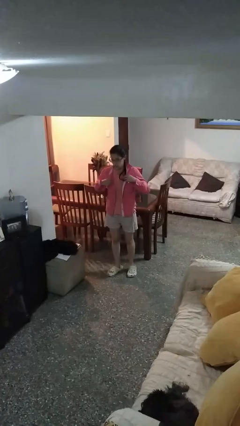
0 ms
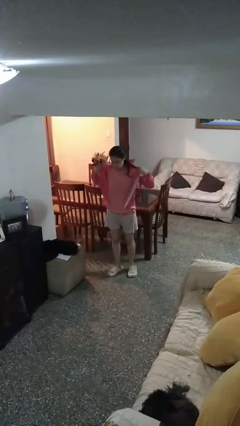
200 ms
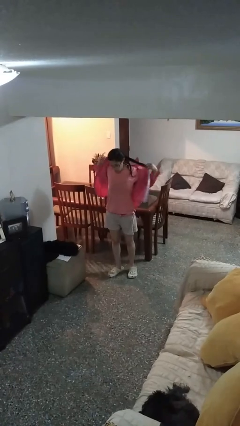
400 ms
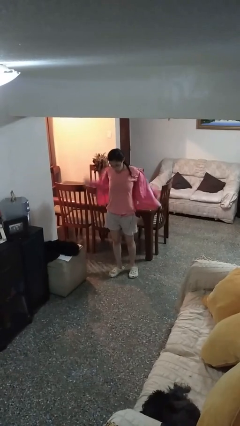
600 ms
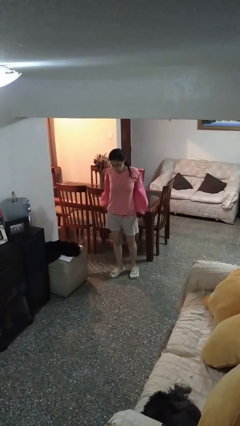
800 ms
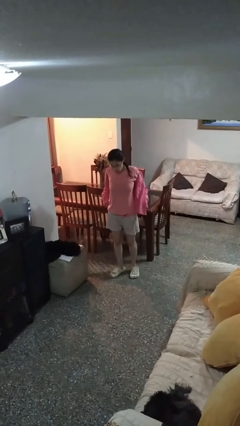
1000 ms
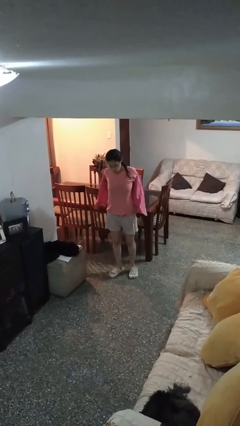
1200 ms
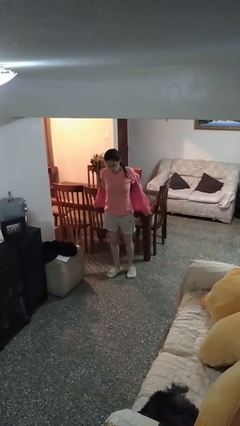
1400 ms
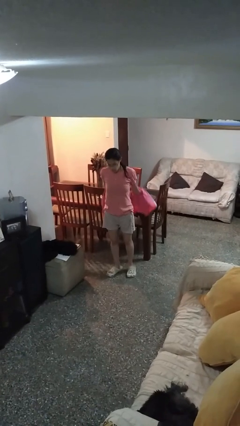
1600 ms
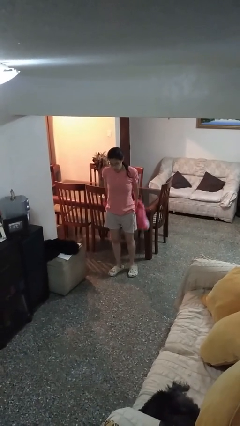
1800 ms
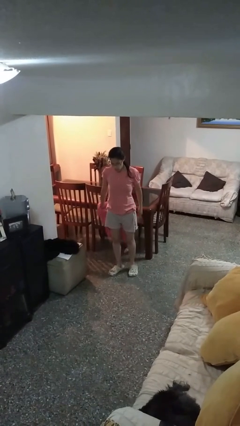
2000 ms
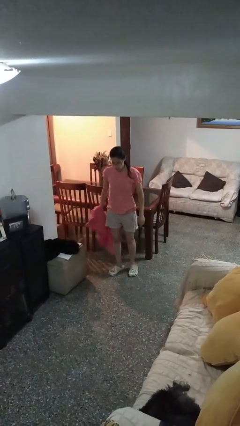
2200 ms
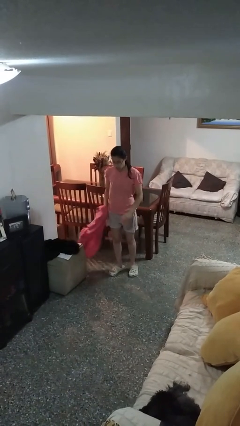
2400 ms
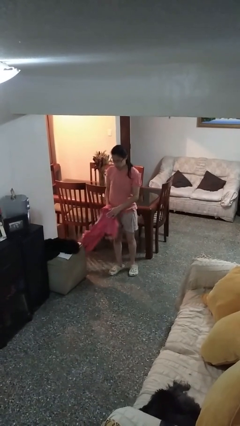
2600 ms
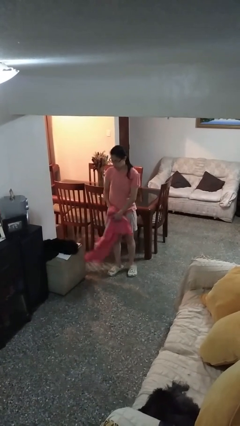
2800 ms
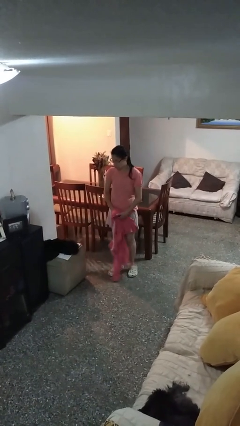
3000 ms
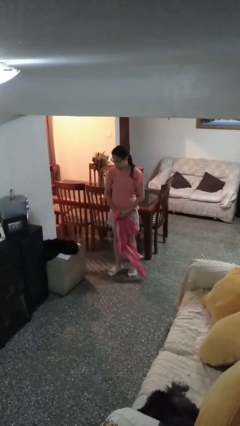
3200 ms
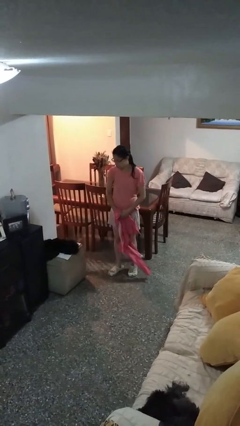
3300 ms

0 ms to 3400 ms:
person takes off shirt

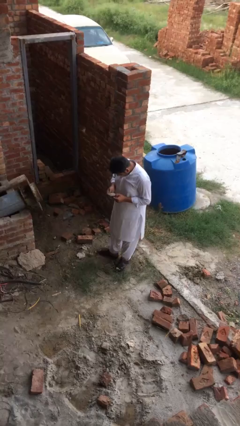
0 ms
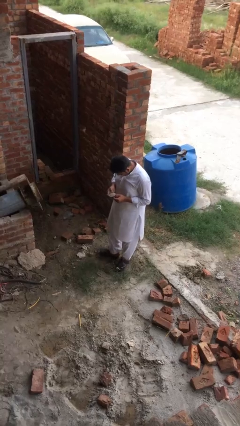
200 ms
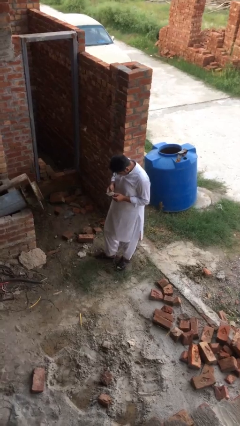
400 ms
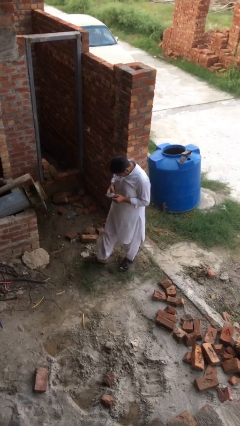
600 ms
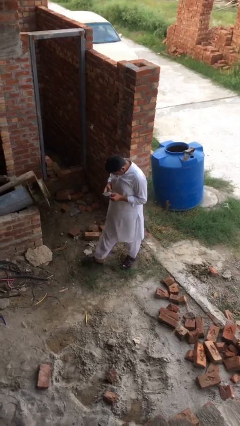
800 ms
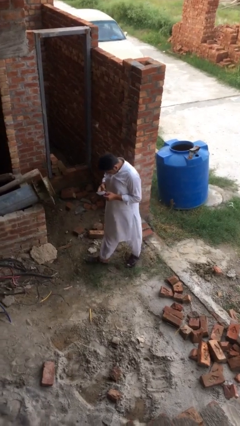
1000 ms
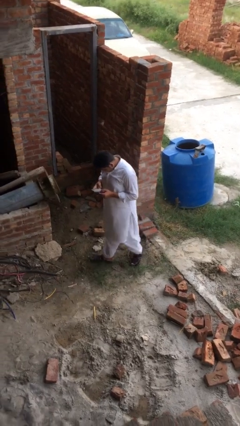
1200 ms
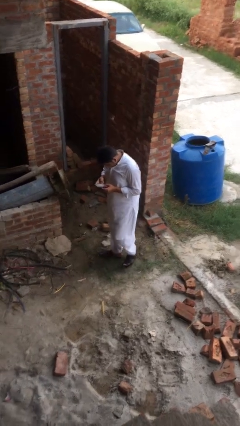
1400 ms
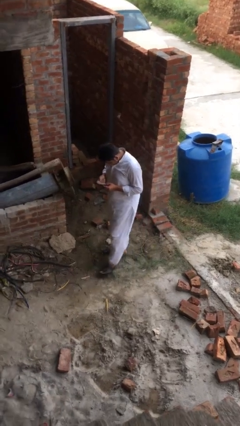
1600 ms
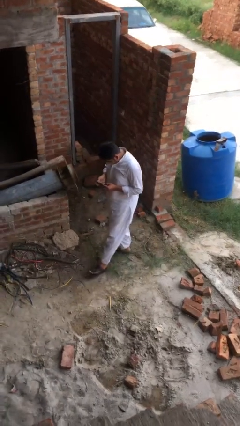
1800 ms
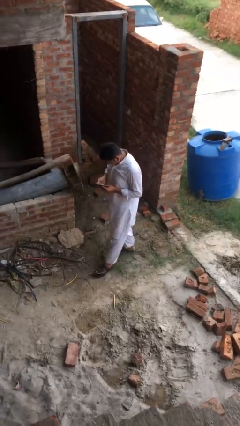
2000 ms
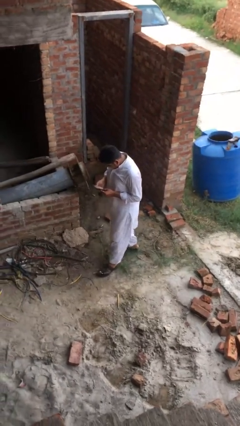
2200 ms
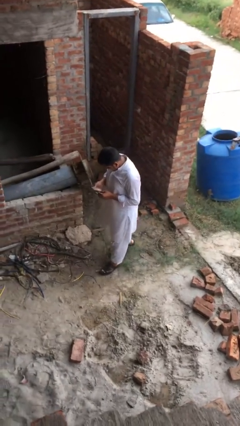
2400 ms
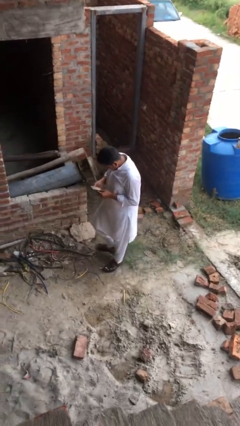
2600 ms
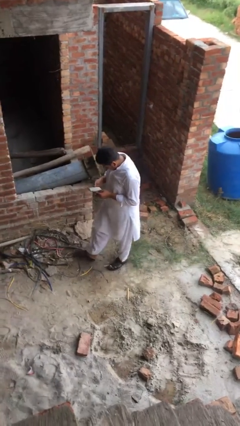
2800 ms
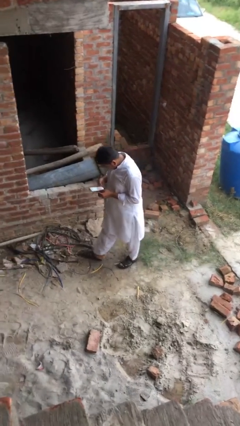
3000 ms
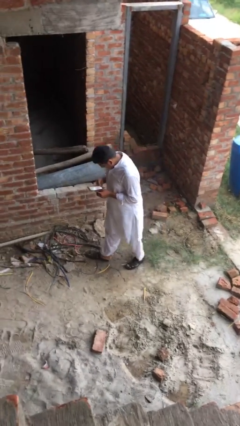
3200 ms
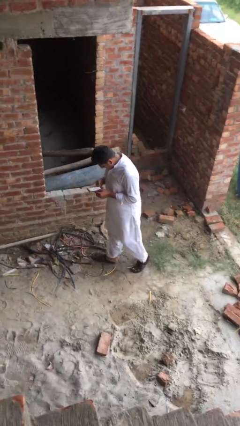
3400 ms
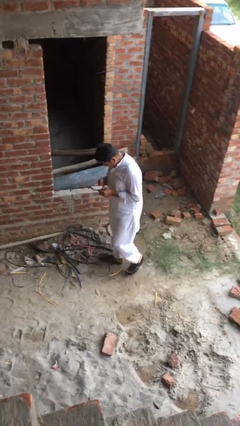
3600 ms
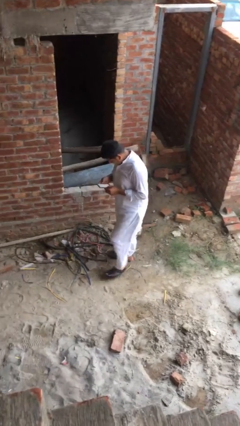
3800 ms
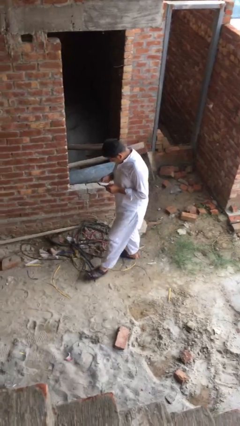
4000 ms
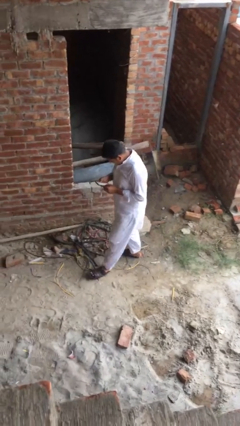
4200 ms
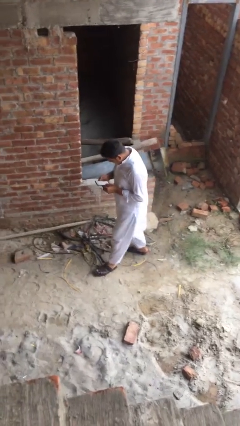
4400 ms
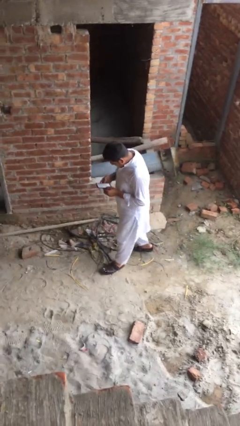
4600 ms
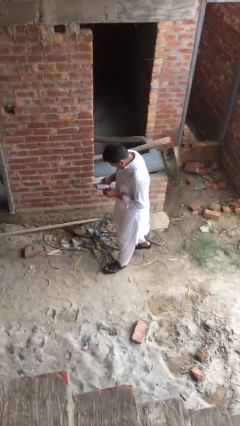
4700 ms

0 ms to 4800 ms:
person texts on phone

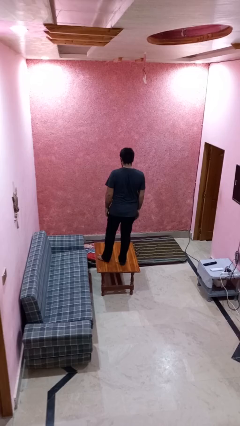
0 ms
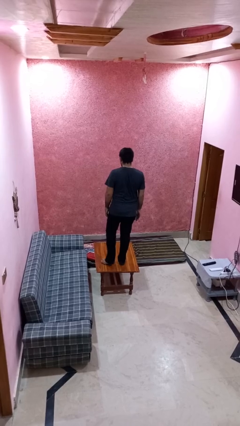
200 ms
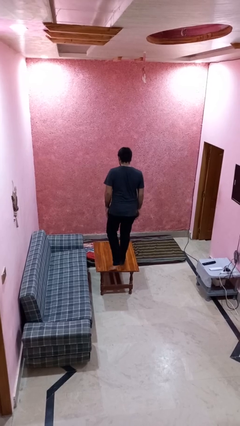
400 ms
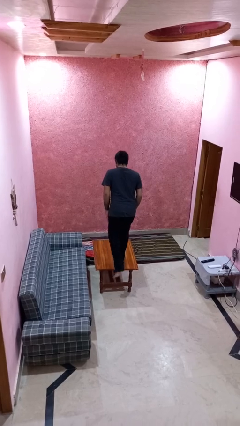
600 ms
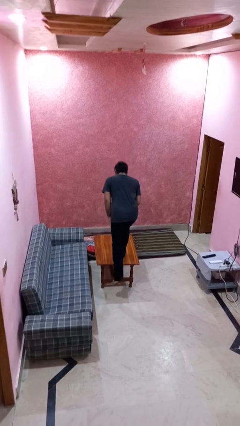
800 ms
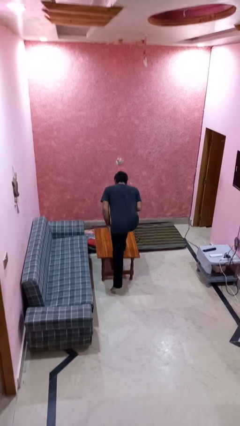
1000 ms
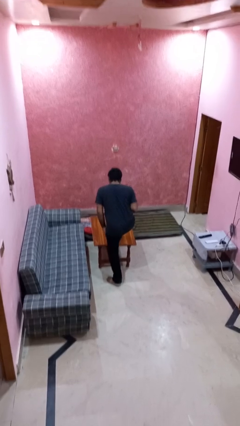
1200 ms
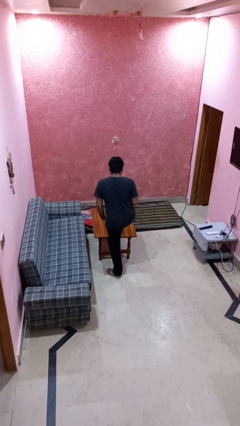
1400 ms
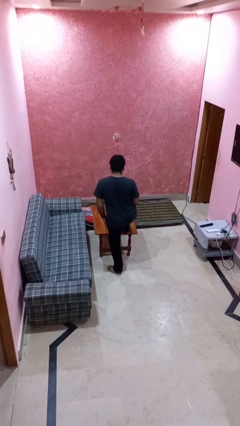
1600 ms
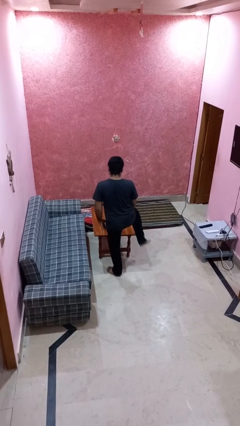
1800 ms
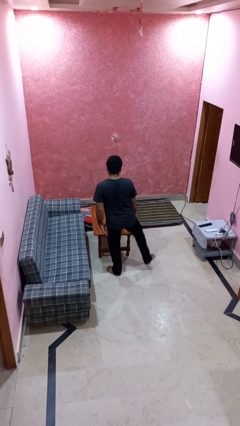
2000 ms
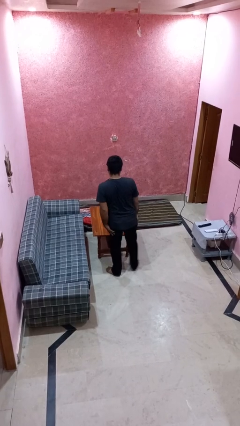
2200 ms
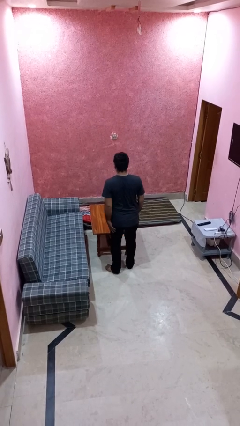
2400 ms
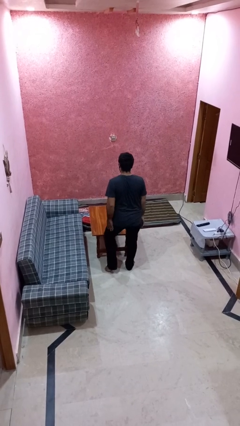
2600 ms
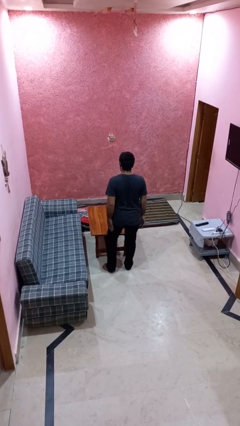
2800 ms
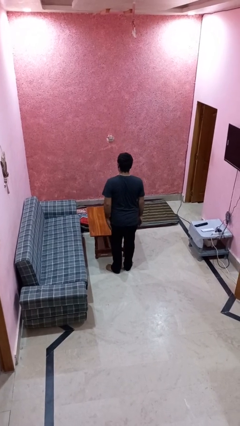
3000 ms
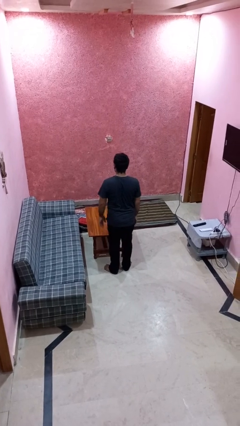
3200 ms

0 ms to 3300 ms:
person climbs off table

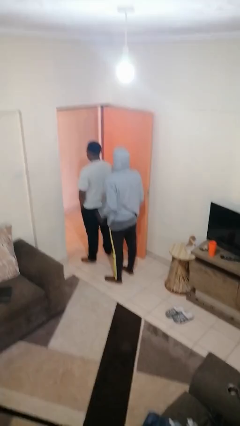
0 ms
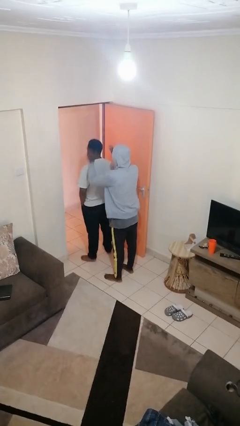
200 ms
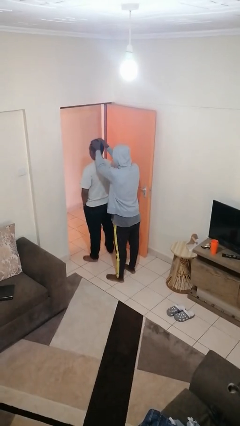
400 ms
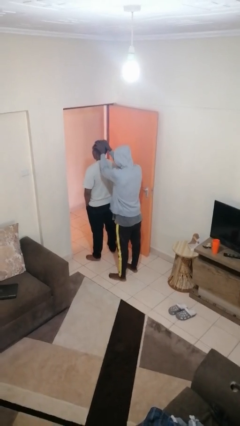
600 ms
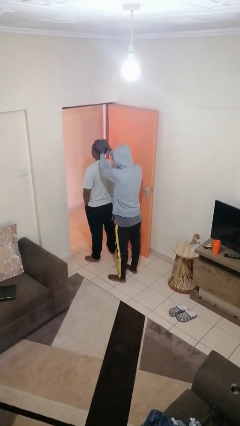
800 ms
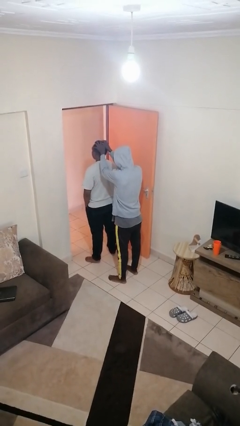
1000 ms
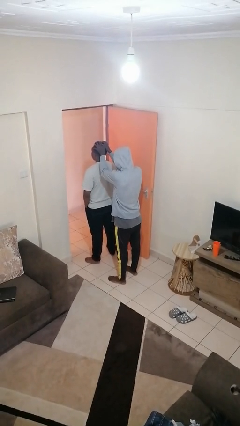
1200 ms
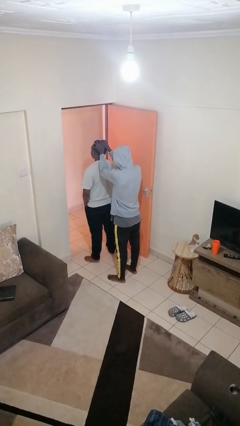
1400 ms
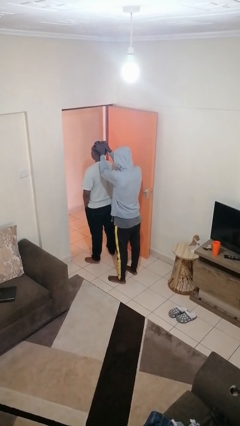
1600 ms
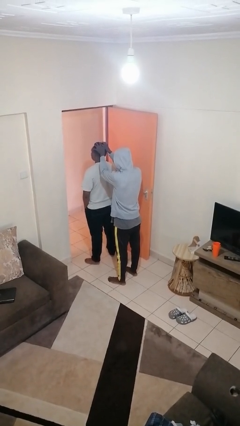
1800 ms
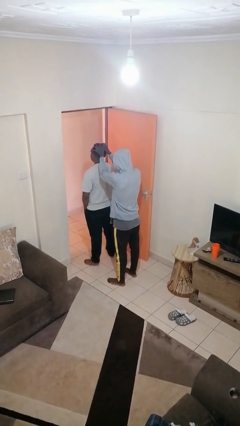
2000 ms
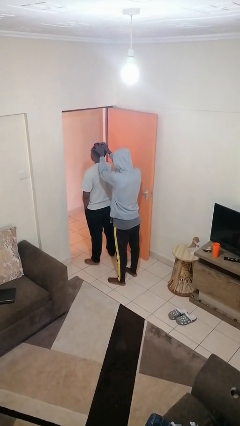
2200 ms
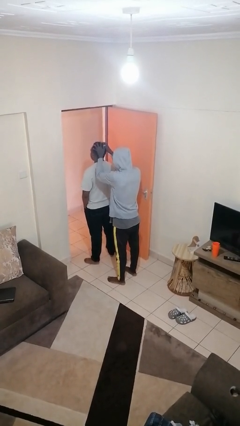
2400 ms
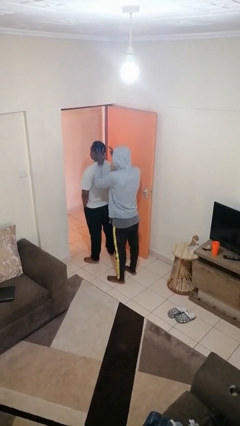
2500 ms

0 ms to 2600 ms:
person grabs person by hair

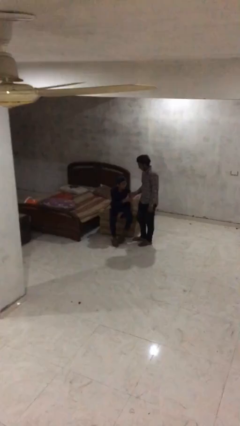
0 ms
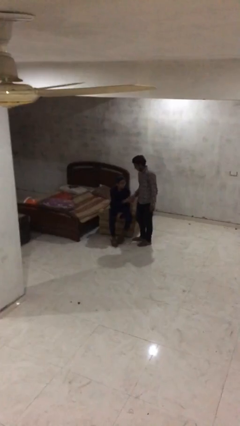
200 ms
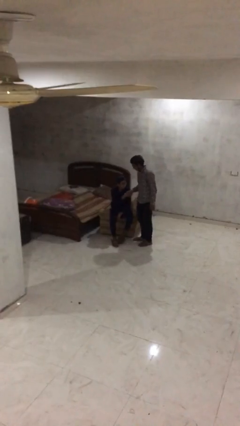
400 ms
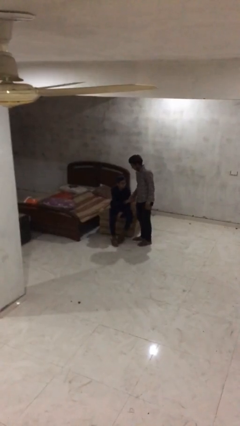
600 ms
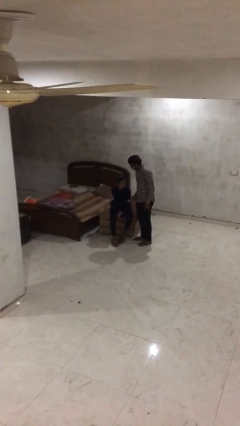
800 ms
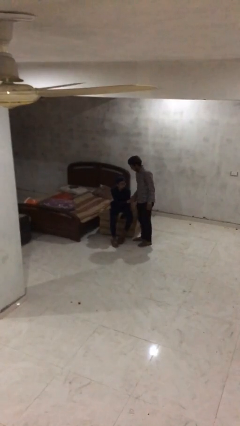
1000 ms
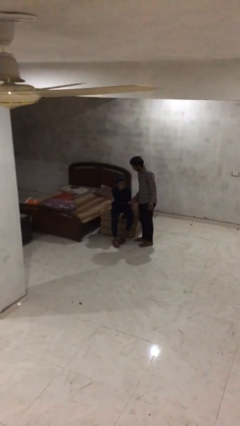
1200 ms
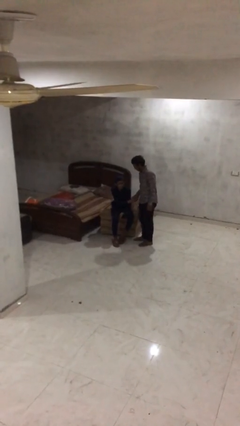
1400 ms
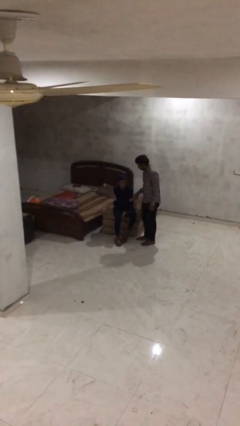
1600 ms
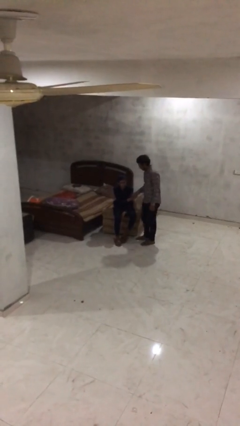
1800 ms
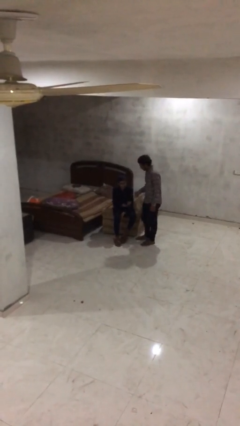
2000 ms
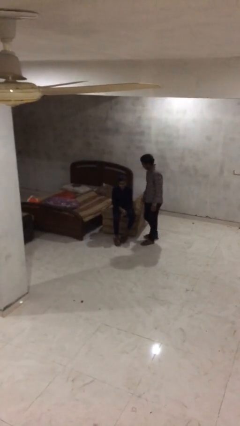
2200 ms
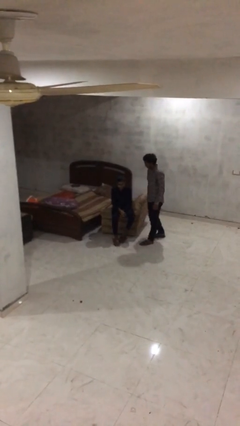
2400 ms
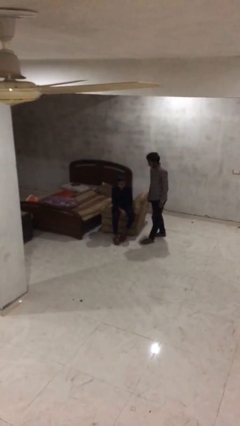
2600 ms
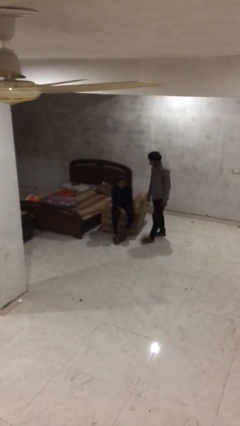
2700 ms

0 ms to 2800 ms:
person shakes hand

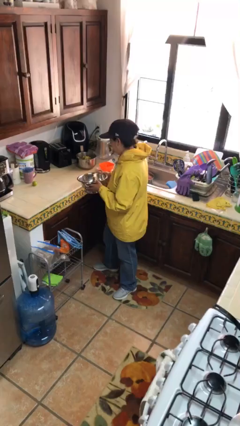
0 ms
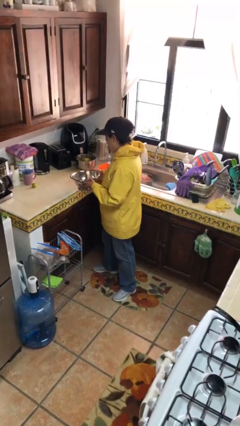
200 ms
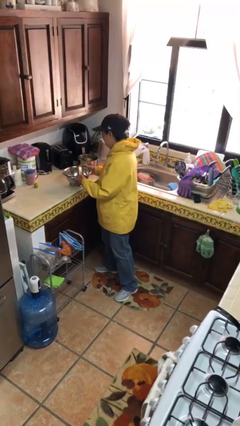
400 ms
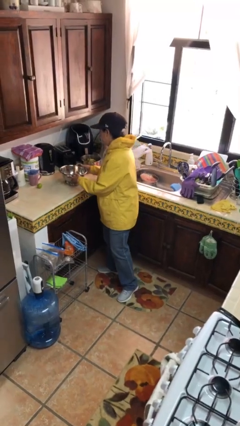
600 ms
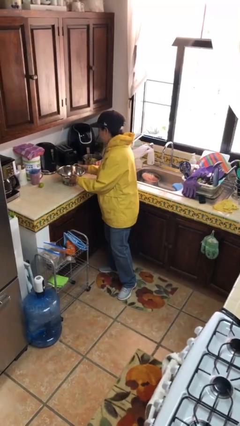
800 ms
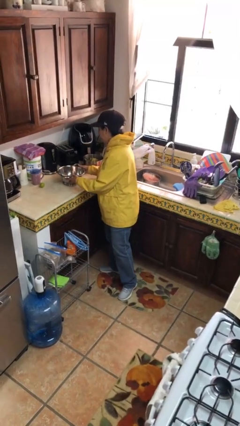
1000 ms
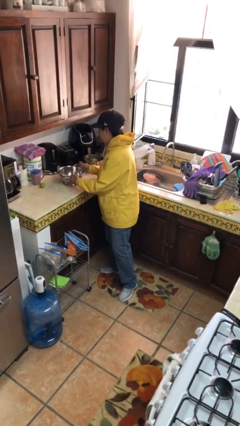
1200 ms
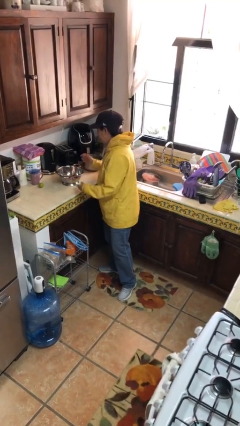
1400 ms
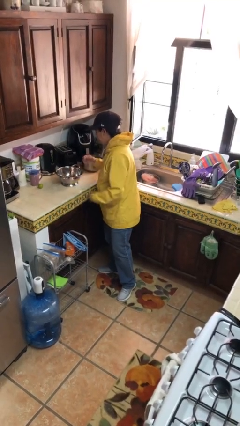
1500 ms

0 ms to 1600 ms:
person puts down object on countertop
